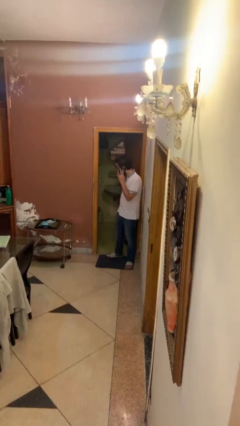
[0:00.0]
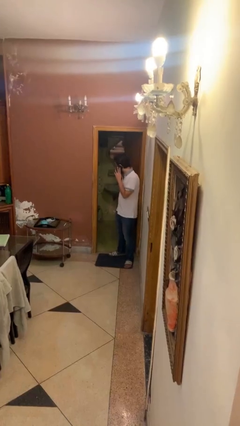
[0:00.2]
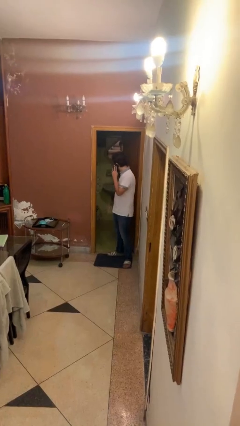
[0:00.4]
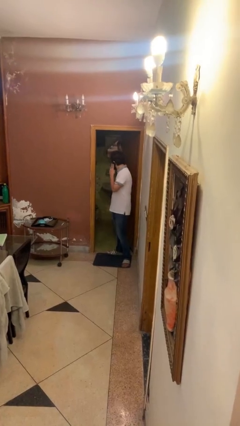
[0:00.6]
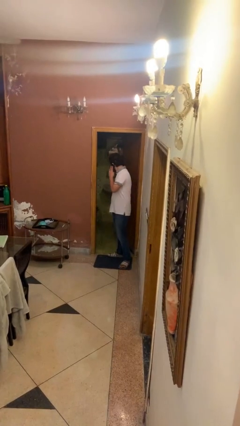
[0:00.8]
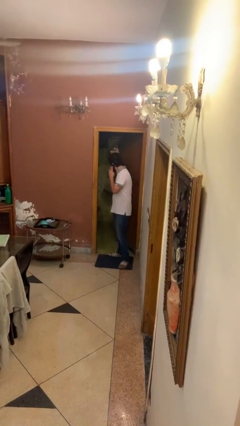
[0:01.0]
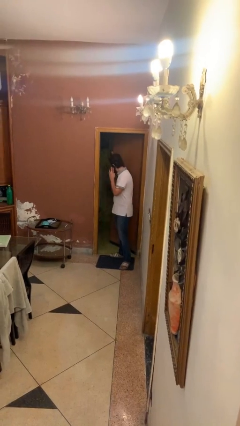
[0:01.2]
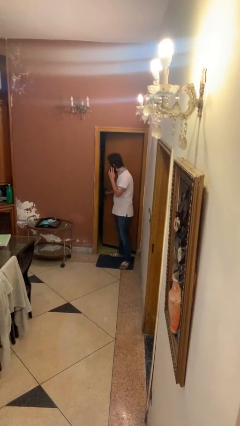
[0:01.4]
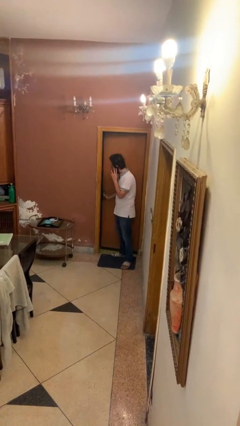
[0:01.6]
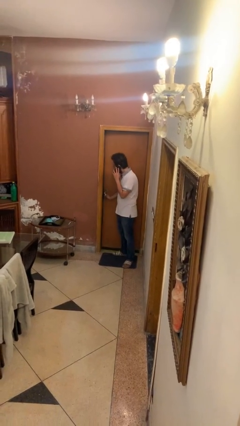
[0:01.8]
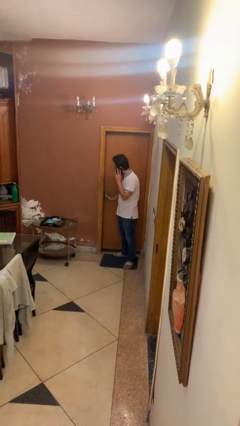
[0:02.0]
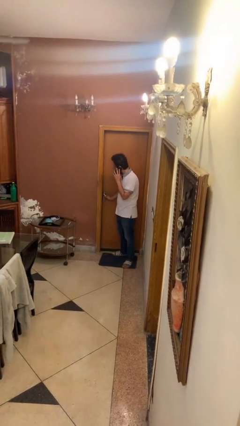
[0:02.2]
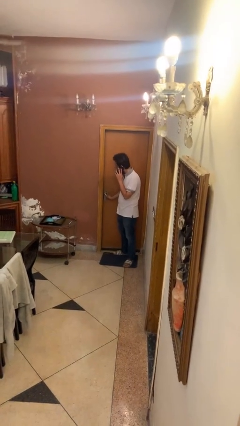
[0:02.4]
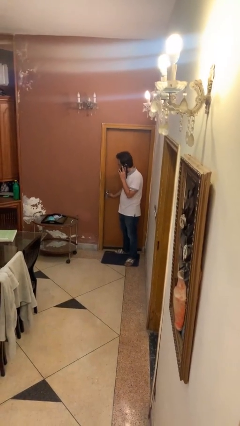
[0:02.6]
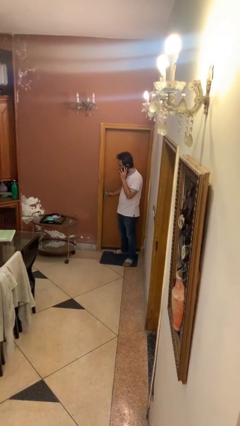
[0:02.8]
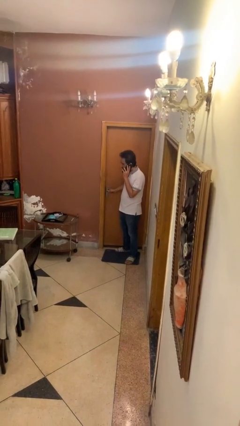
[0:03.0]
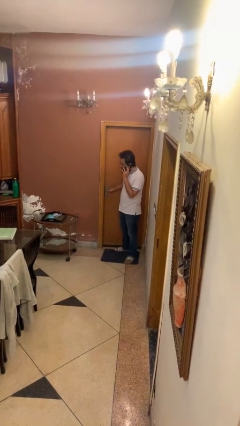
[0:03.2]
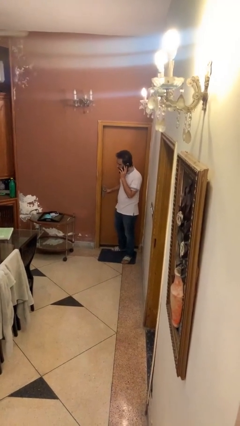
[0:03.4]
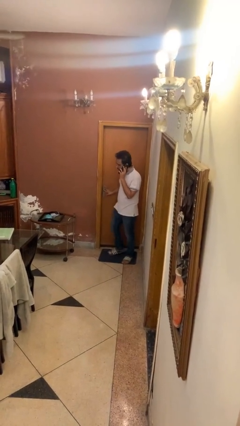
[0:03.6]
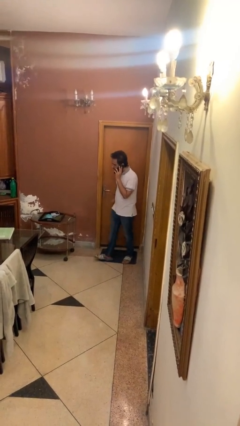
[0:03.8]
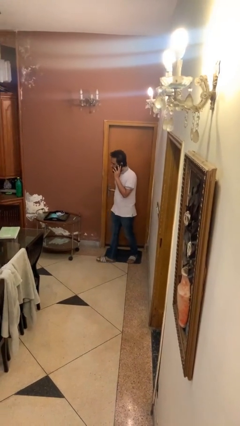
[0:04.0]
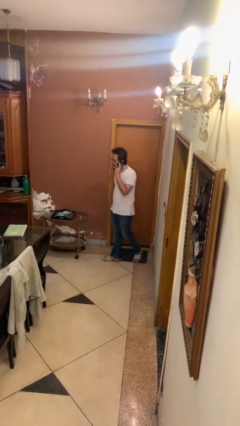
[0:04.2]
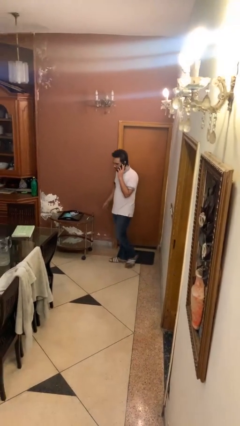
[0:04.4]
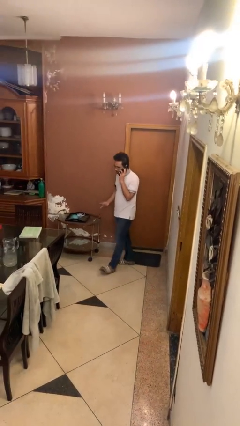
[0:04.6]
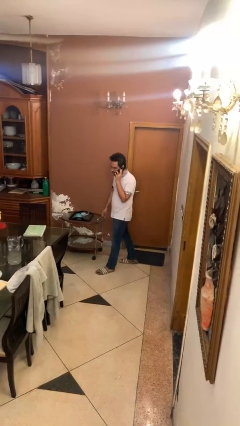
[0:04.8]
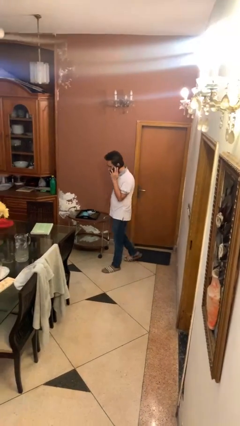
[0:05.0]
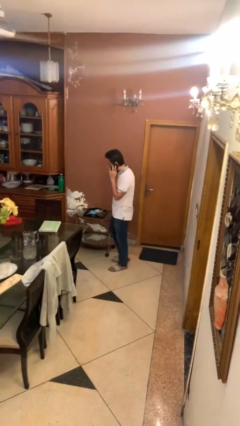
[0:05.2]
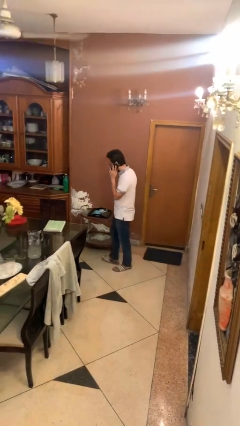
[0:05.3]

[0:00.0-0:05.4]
person closes facility door

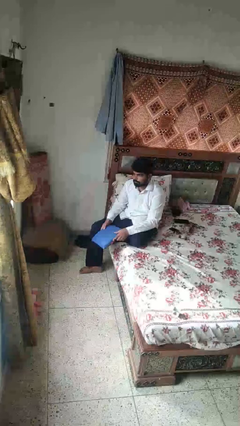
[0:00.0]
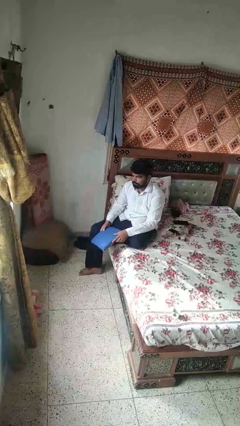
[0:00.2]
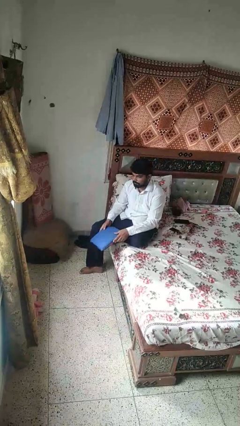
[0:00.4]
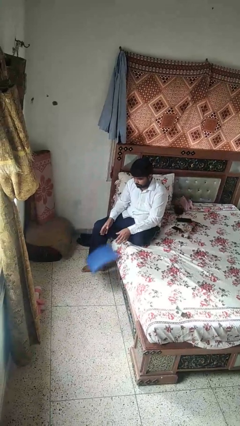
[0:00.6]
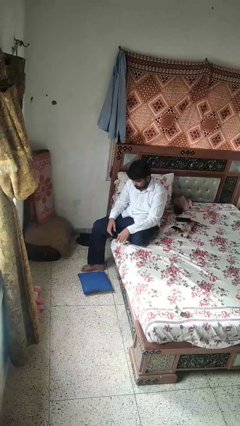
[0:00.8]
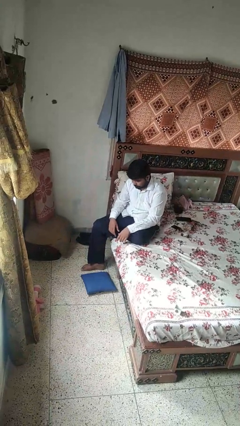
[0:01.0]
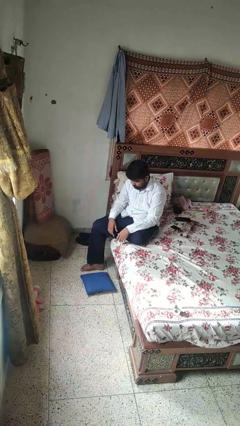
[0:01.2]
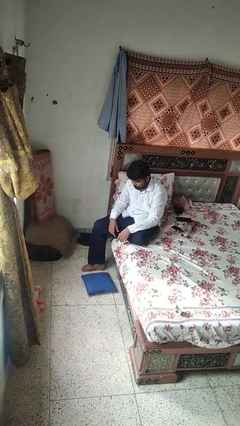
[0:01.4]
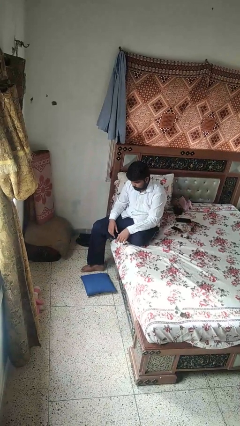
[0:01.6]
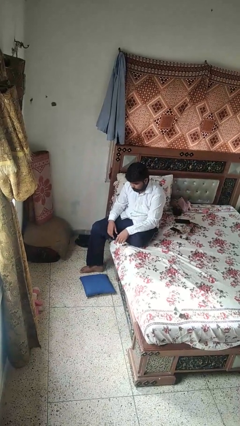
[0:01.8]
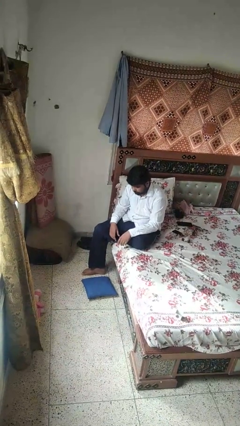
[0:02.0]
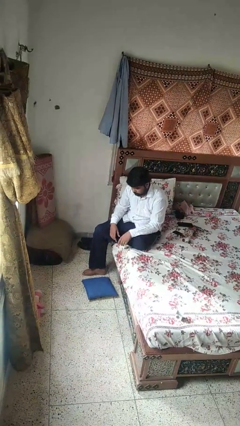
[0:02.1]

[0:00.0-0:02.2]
person drops object

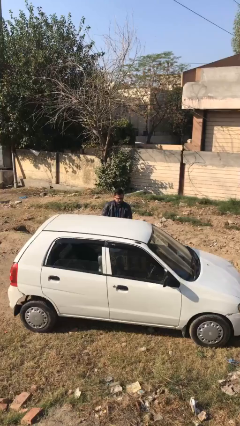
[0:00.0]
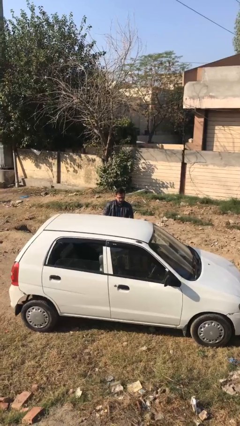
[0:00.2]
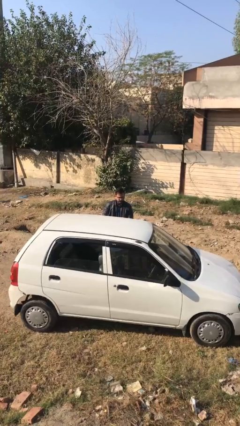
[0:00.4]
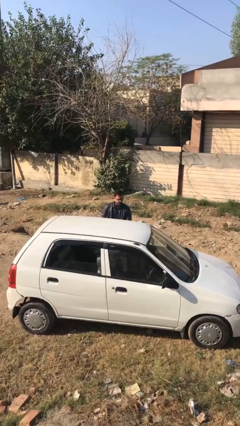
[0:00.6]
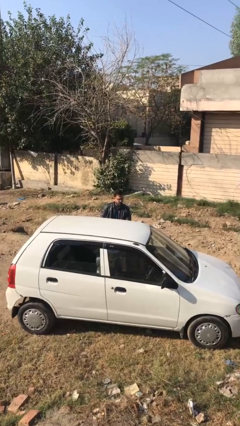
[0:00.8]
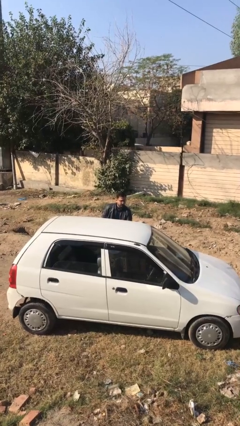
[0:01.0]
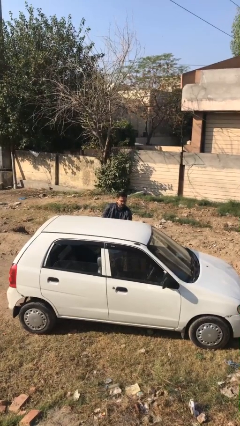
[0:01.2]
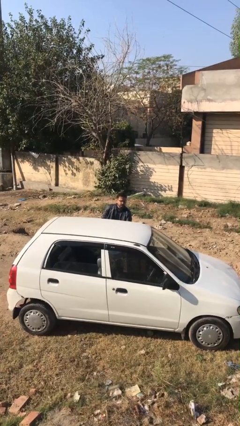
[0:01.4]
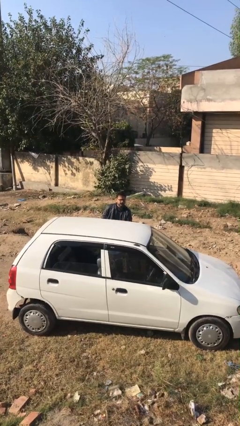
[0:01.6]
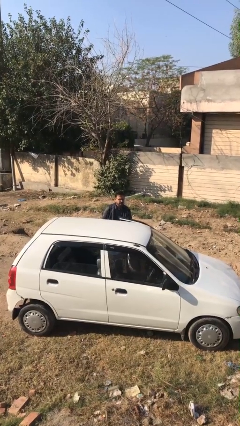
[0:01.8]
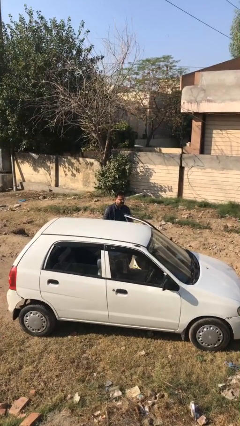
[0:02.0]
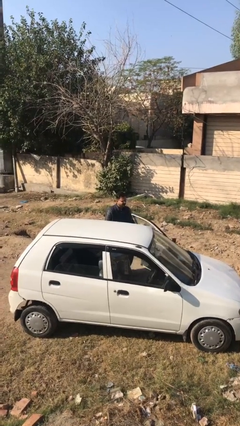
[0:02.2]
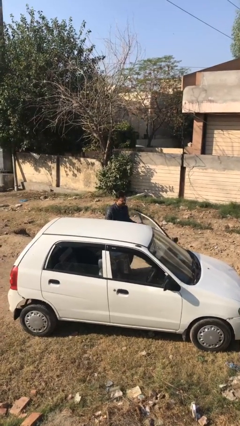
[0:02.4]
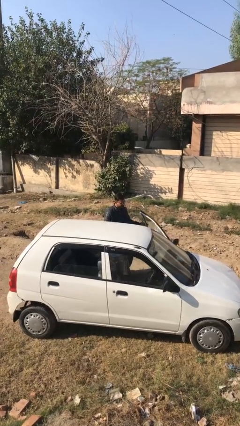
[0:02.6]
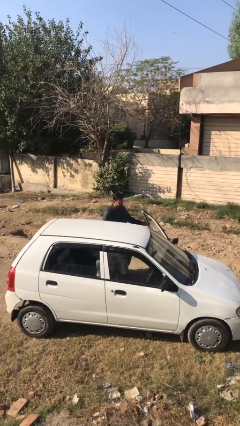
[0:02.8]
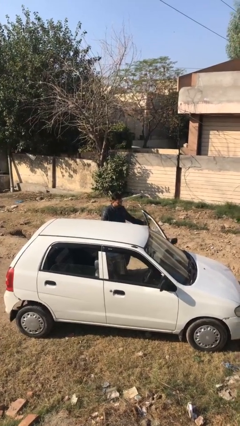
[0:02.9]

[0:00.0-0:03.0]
person opens car door

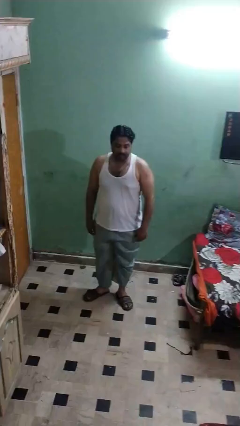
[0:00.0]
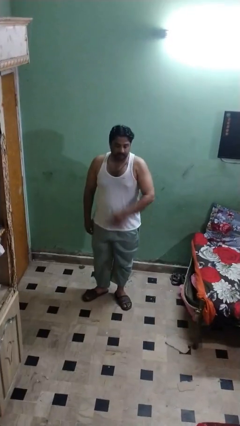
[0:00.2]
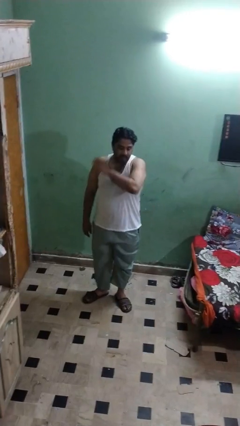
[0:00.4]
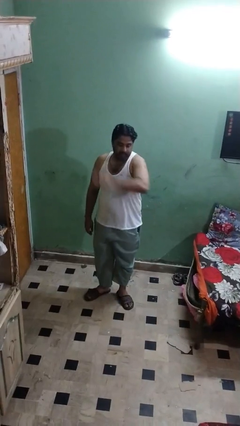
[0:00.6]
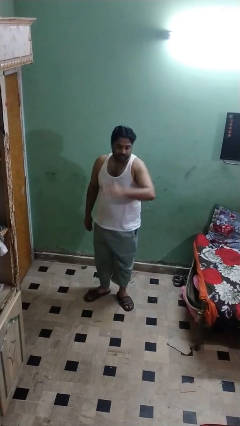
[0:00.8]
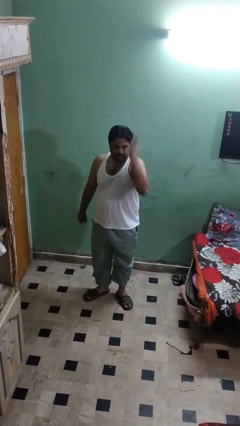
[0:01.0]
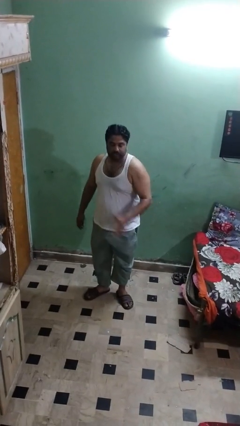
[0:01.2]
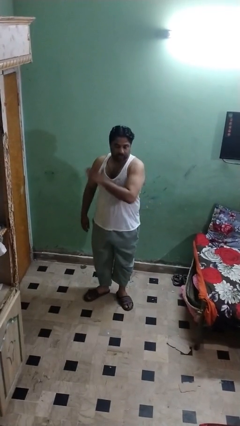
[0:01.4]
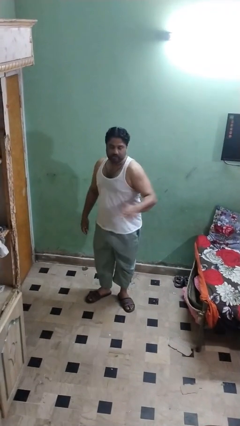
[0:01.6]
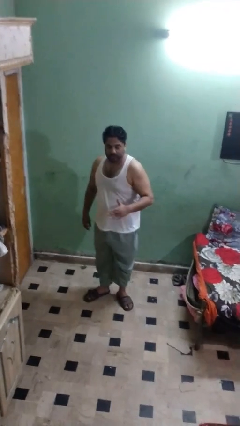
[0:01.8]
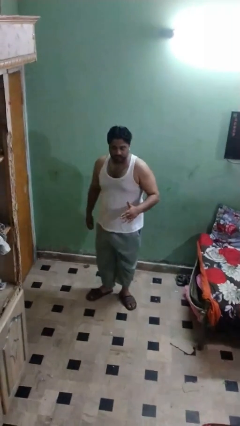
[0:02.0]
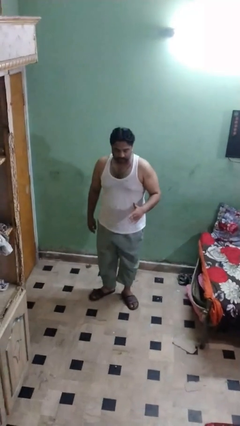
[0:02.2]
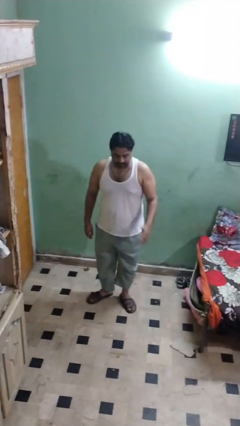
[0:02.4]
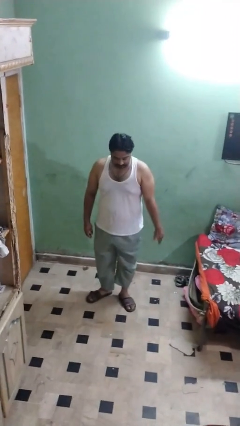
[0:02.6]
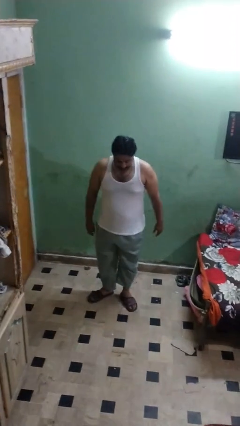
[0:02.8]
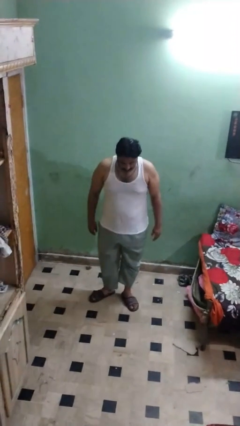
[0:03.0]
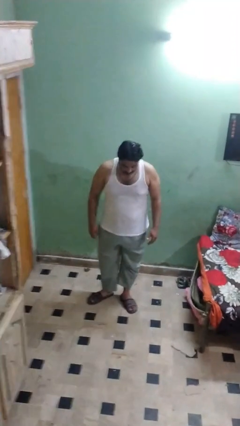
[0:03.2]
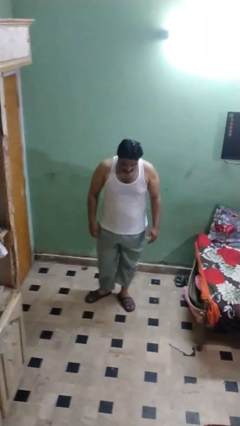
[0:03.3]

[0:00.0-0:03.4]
person karate chop

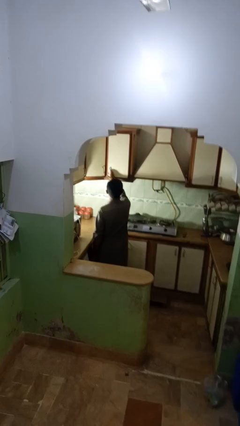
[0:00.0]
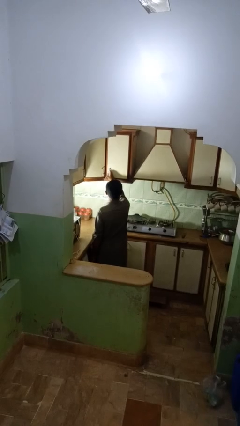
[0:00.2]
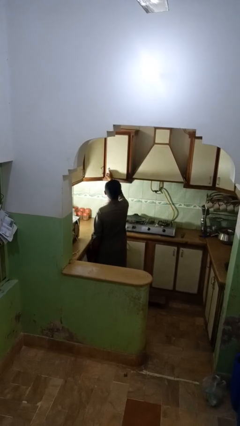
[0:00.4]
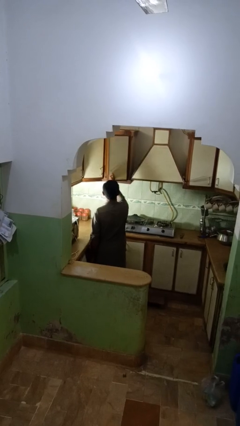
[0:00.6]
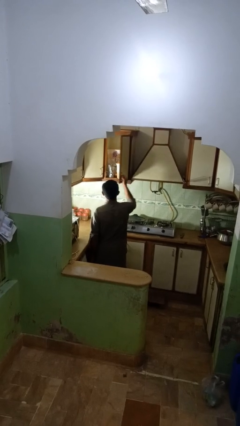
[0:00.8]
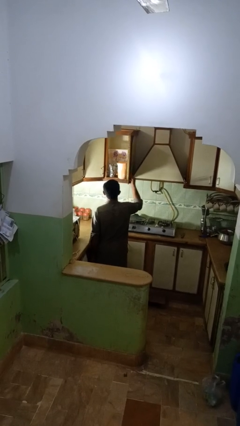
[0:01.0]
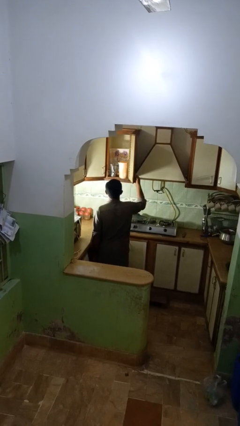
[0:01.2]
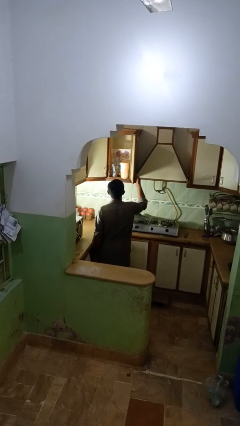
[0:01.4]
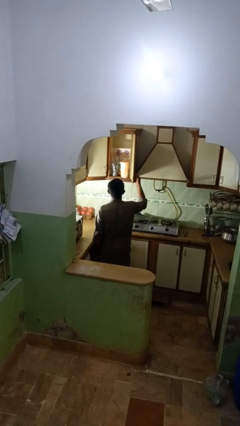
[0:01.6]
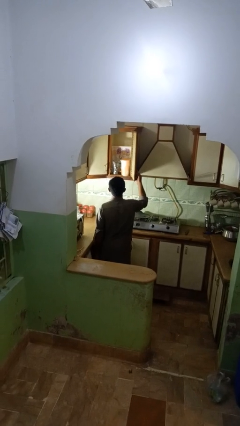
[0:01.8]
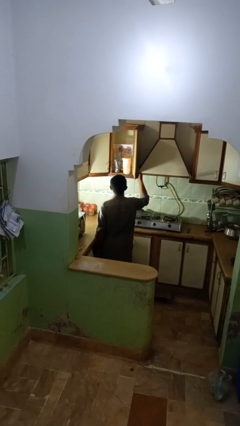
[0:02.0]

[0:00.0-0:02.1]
person opens kitchen drawer

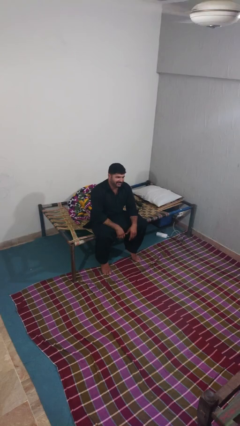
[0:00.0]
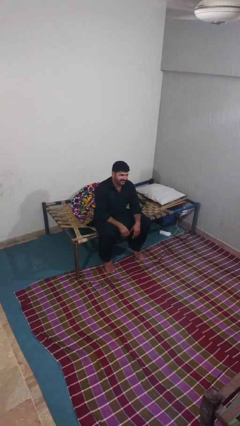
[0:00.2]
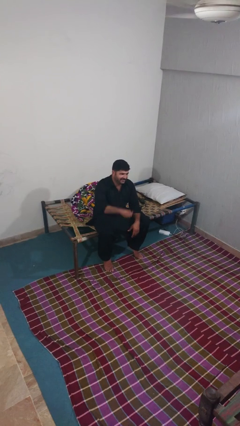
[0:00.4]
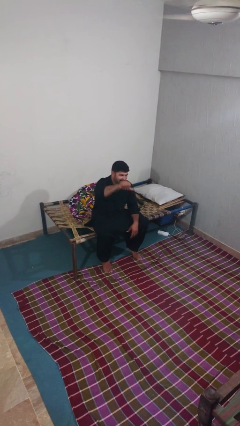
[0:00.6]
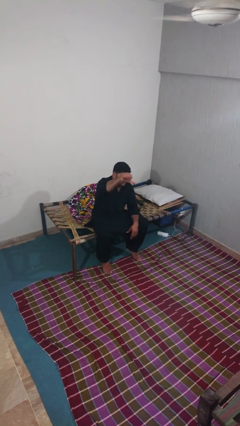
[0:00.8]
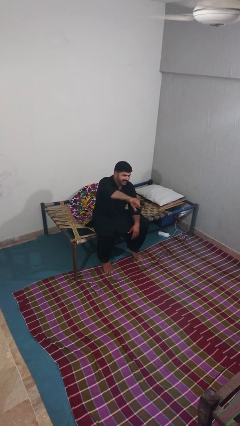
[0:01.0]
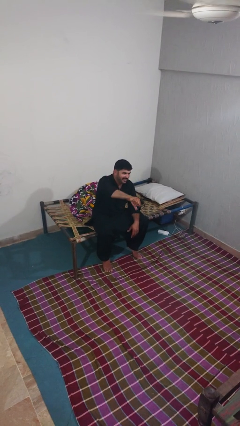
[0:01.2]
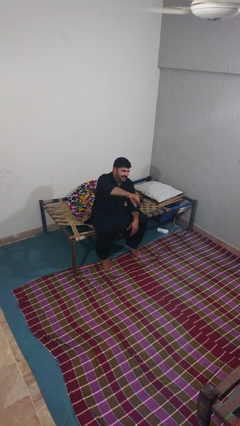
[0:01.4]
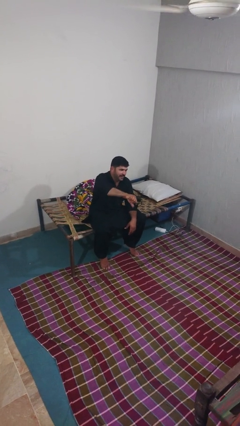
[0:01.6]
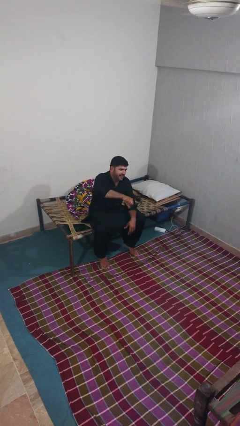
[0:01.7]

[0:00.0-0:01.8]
person gestures thumbs down
